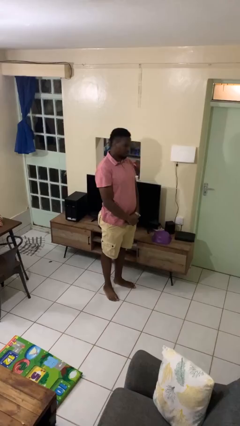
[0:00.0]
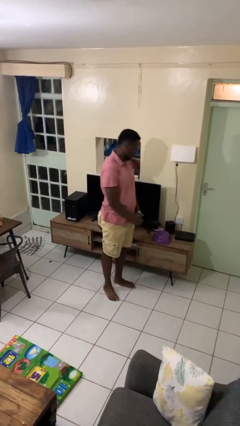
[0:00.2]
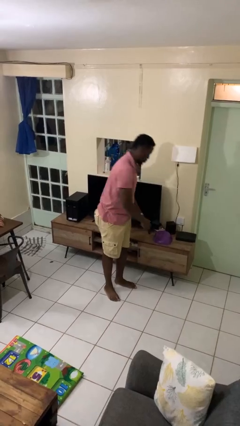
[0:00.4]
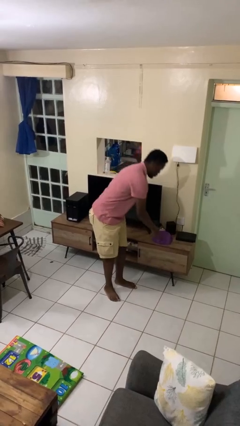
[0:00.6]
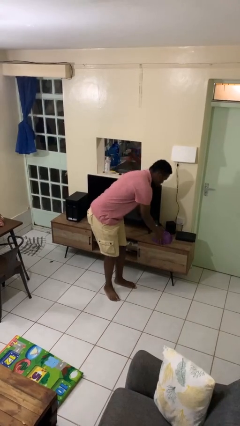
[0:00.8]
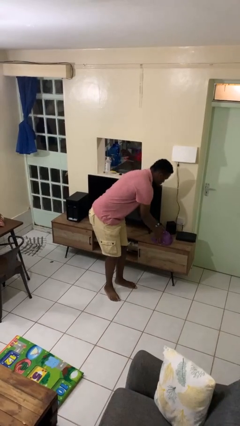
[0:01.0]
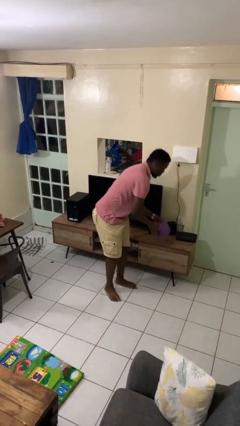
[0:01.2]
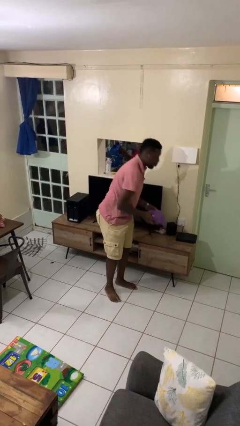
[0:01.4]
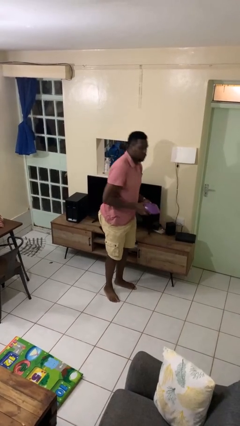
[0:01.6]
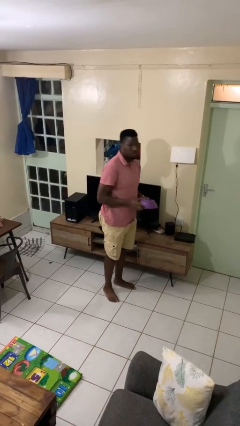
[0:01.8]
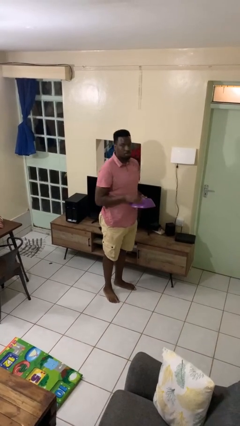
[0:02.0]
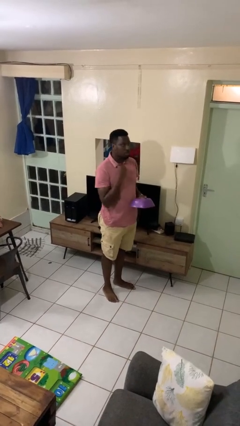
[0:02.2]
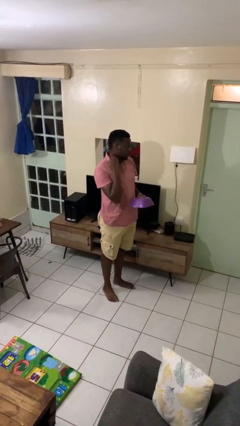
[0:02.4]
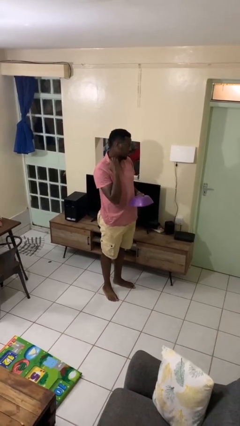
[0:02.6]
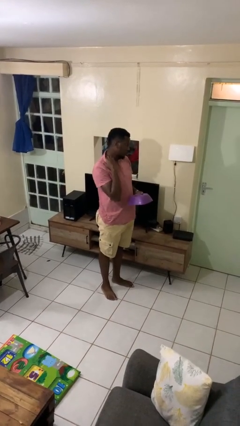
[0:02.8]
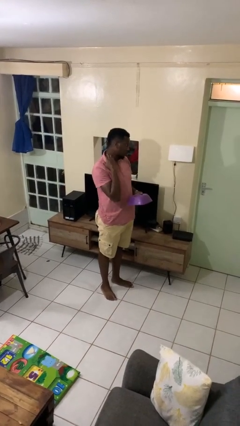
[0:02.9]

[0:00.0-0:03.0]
person picks up object from countertop

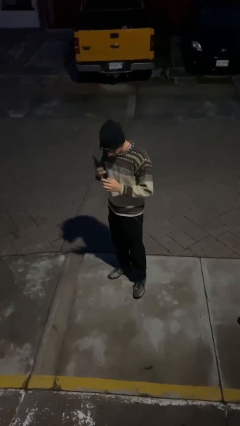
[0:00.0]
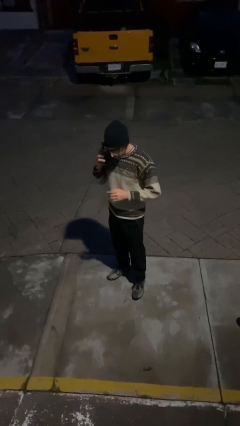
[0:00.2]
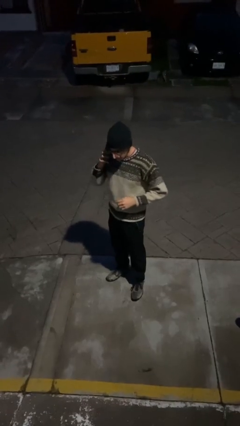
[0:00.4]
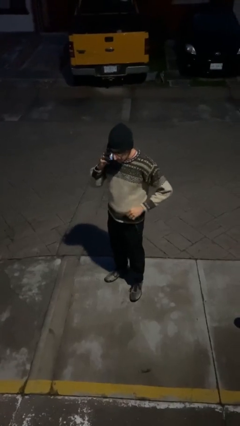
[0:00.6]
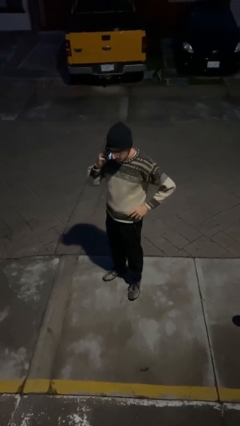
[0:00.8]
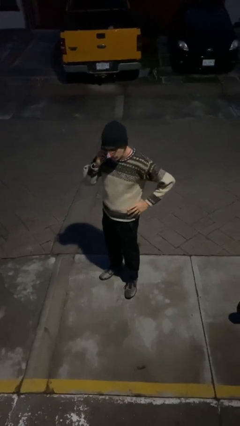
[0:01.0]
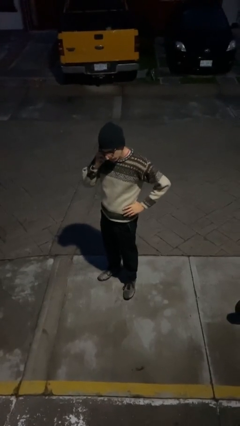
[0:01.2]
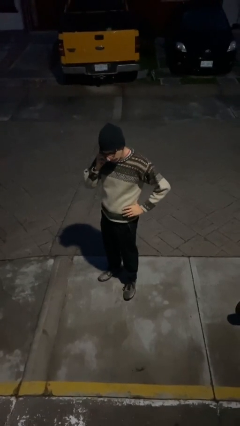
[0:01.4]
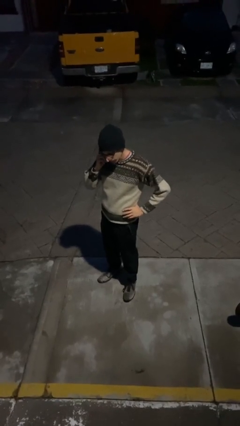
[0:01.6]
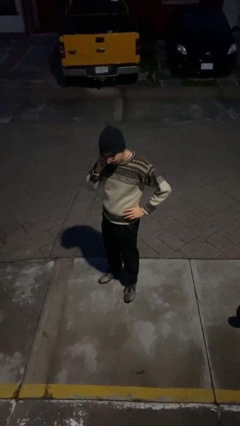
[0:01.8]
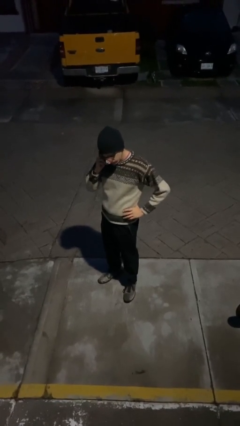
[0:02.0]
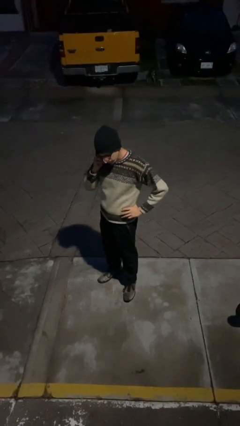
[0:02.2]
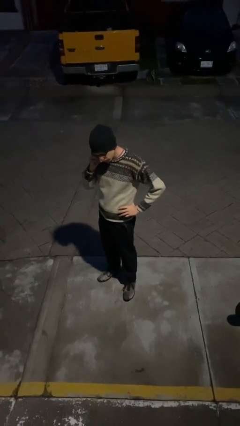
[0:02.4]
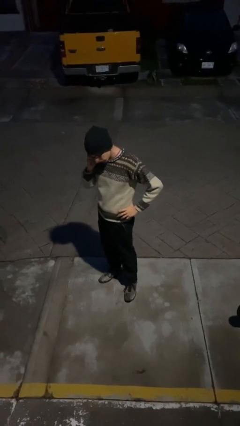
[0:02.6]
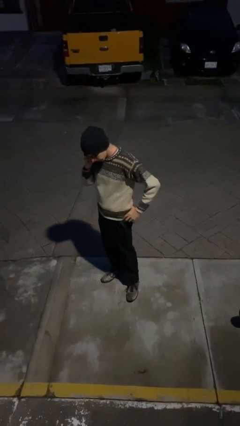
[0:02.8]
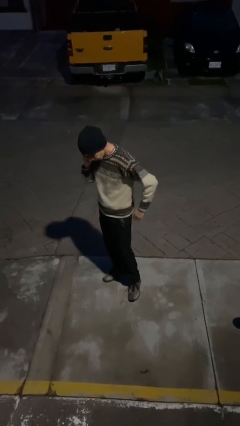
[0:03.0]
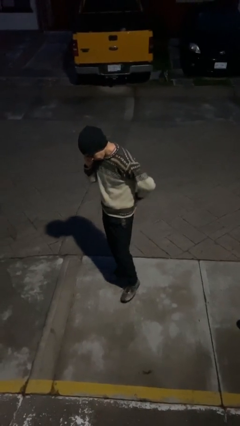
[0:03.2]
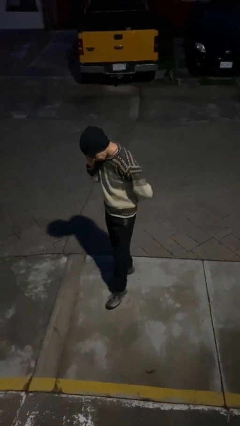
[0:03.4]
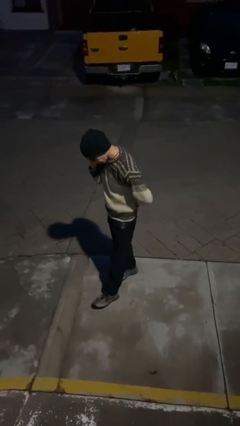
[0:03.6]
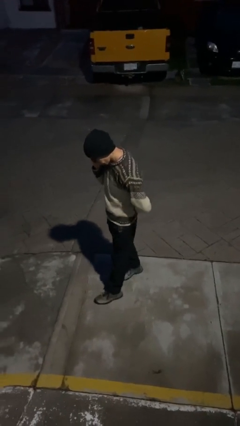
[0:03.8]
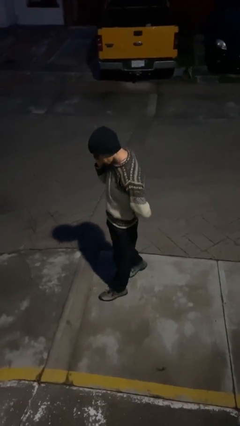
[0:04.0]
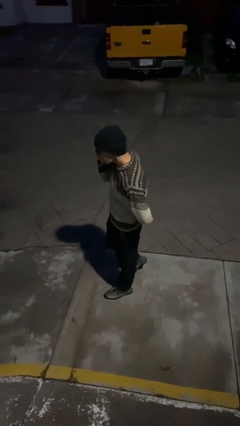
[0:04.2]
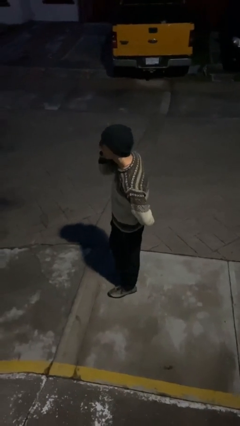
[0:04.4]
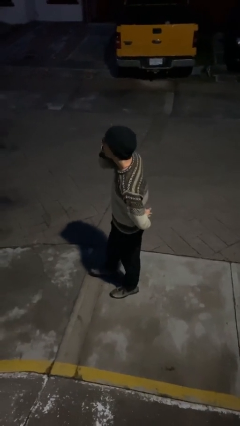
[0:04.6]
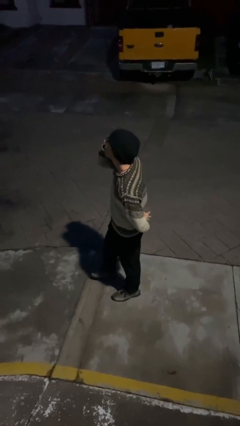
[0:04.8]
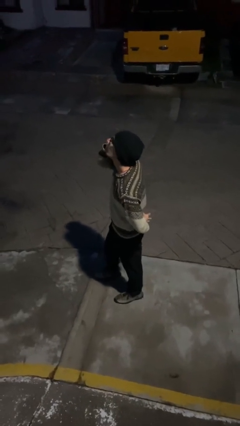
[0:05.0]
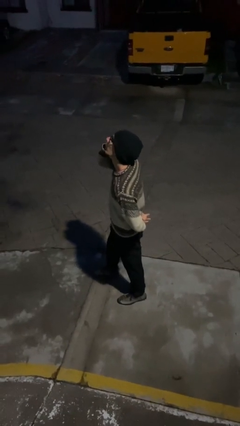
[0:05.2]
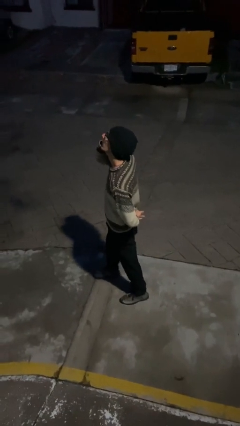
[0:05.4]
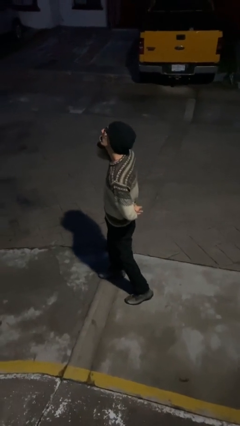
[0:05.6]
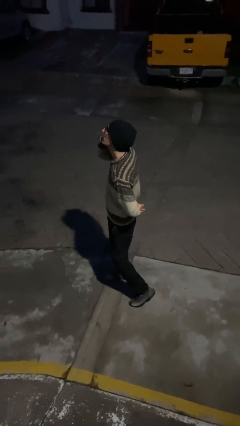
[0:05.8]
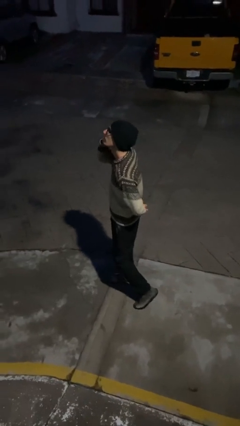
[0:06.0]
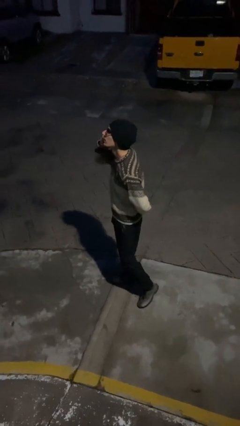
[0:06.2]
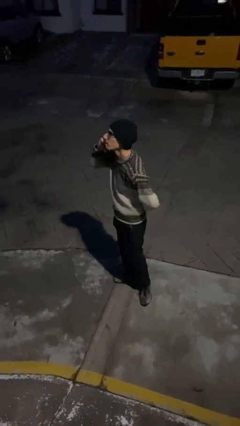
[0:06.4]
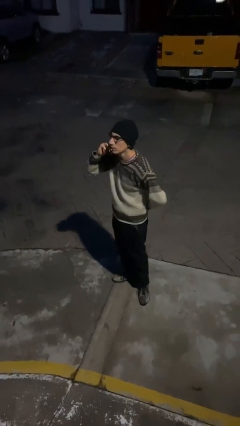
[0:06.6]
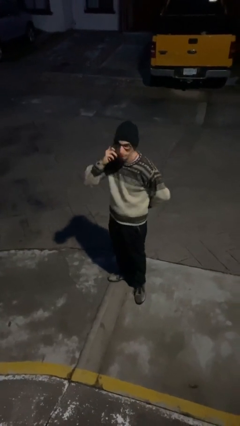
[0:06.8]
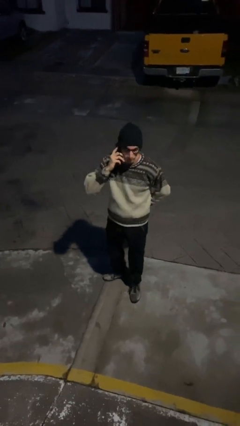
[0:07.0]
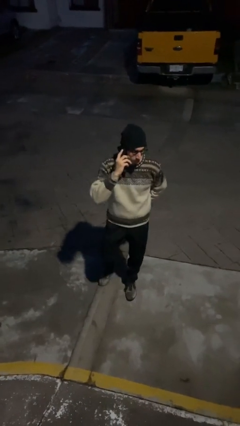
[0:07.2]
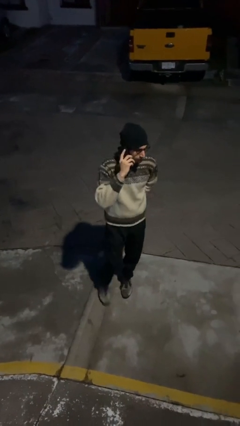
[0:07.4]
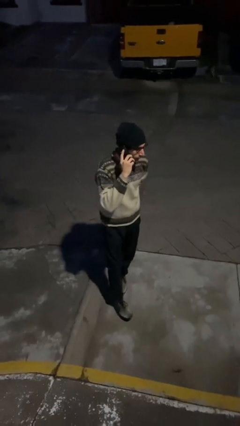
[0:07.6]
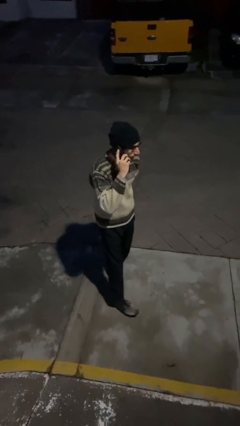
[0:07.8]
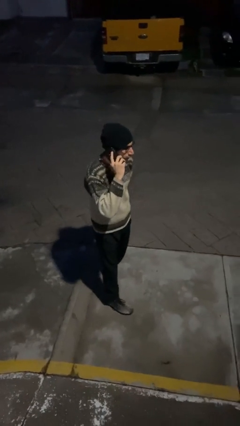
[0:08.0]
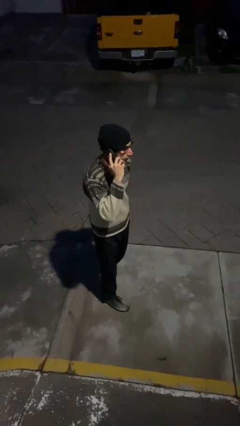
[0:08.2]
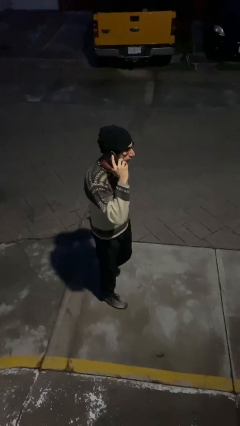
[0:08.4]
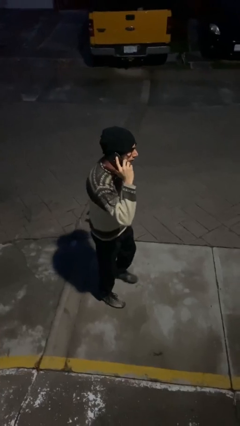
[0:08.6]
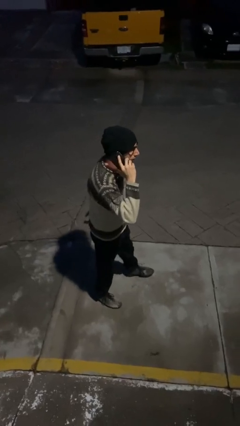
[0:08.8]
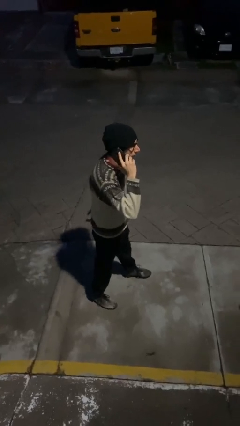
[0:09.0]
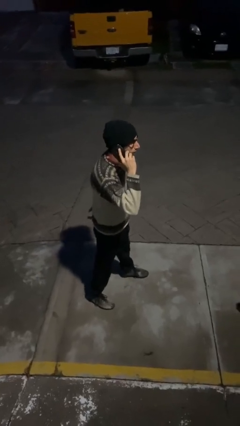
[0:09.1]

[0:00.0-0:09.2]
person talks on phone

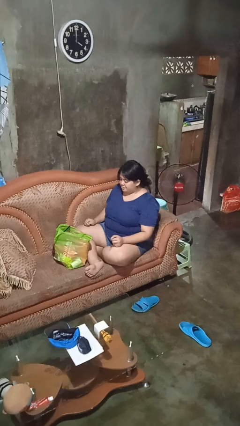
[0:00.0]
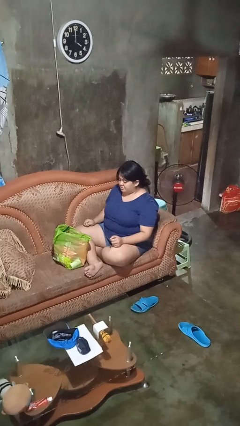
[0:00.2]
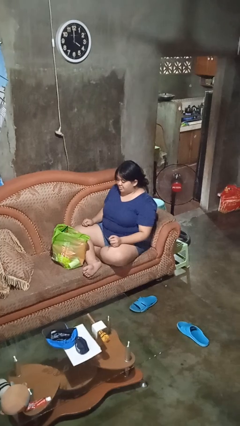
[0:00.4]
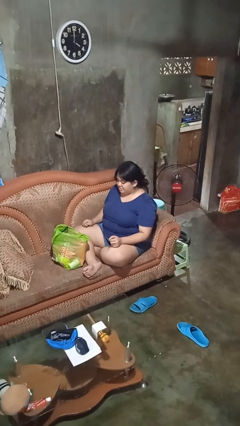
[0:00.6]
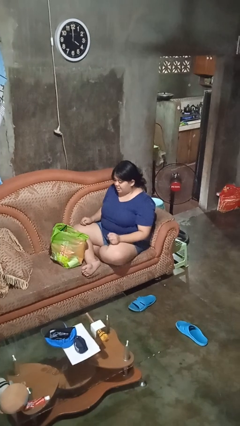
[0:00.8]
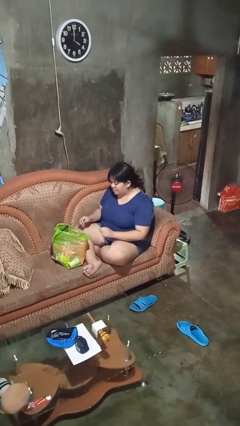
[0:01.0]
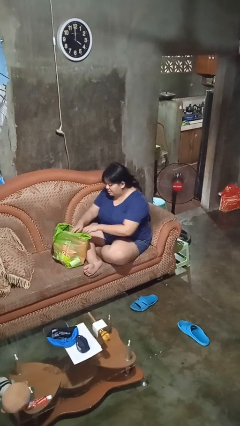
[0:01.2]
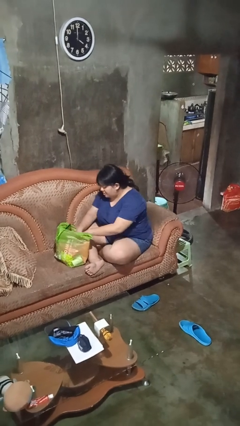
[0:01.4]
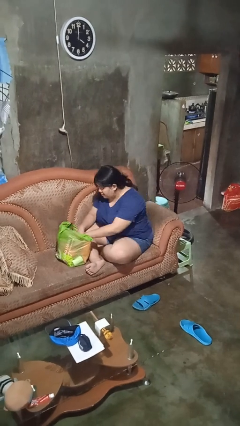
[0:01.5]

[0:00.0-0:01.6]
person searches in bag

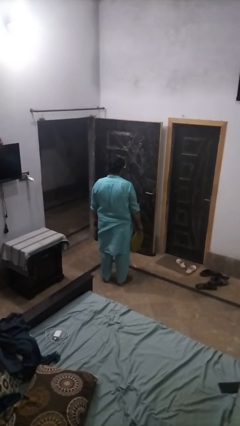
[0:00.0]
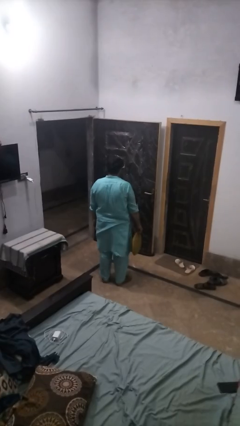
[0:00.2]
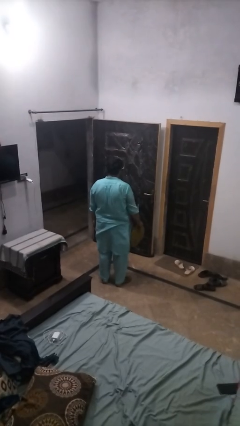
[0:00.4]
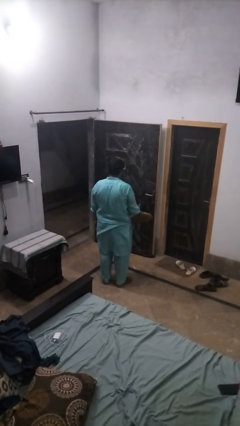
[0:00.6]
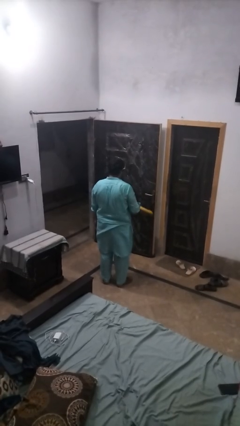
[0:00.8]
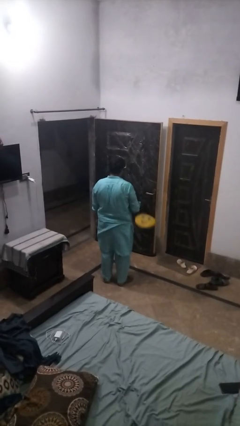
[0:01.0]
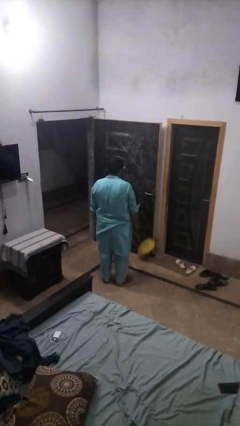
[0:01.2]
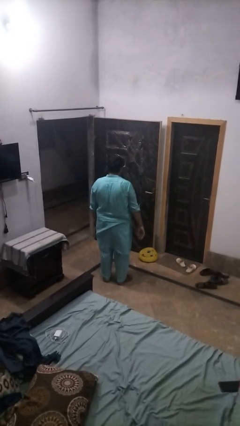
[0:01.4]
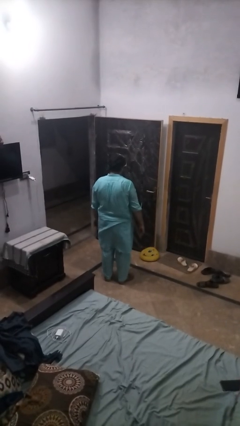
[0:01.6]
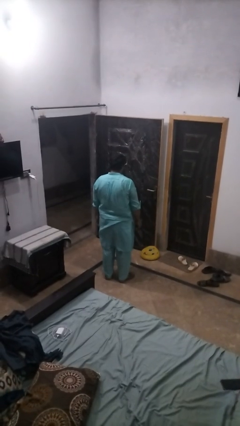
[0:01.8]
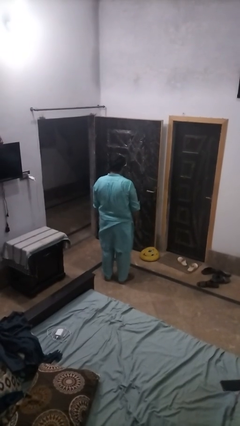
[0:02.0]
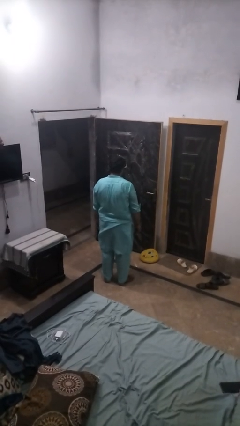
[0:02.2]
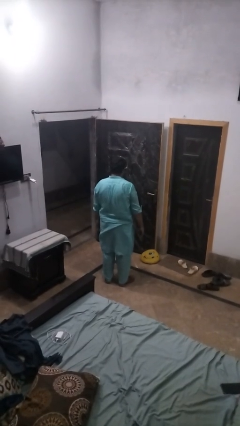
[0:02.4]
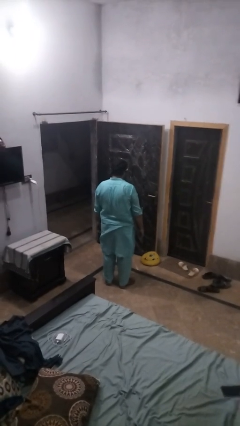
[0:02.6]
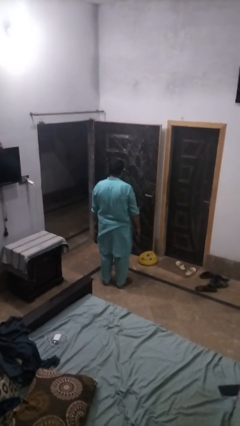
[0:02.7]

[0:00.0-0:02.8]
person throws object to ground

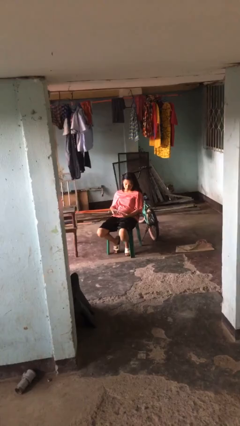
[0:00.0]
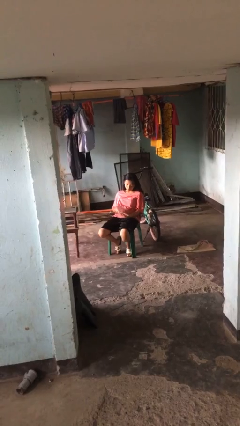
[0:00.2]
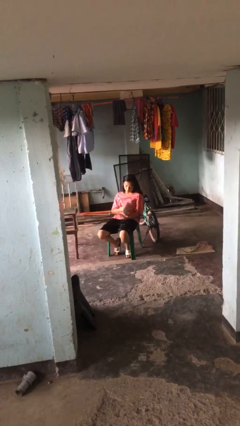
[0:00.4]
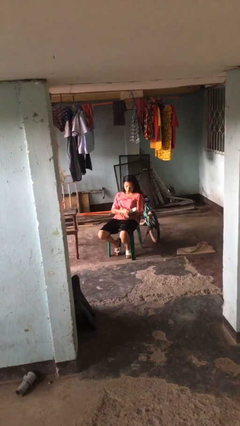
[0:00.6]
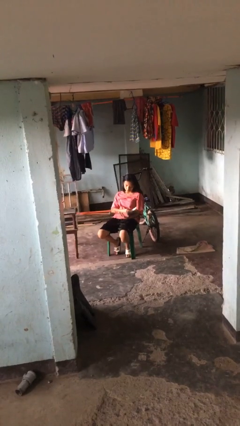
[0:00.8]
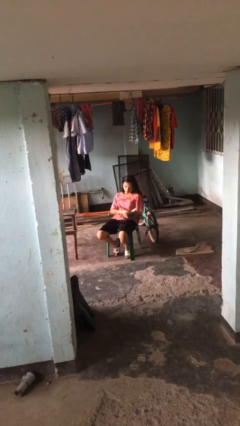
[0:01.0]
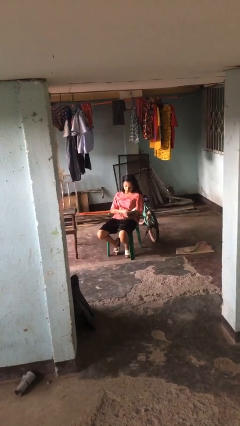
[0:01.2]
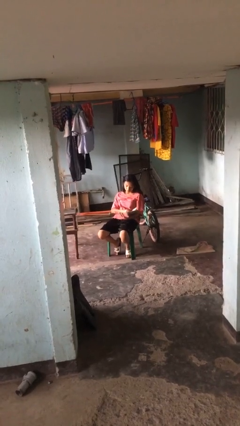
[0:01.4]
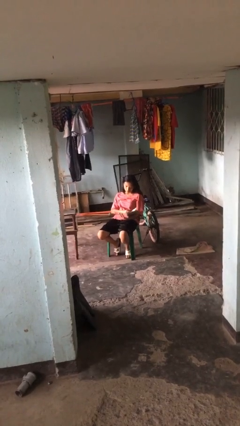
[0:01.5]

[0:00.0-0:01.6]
person reads document
